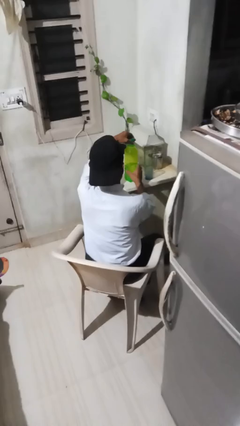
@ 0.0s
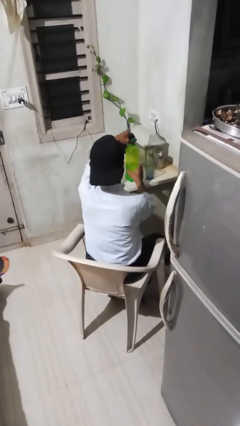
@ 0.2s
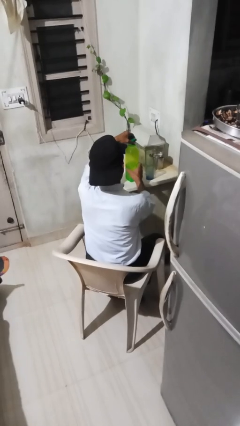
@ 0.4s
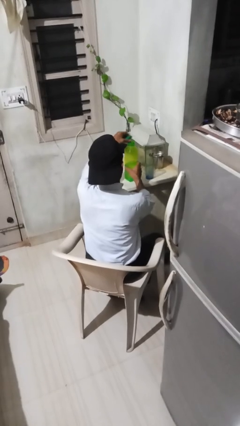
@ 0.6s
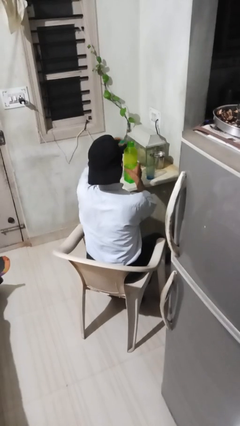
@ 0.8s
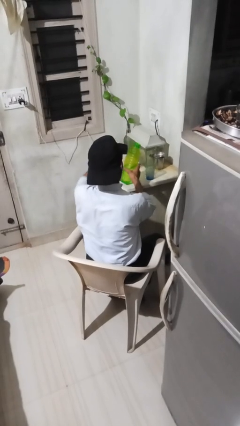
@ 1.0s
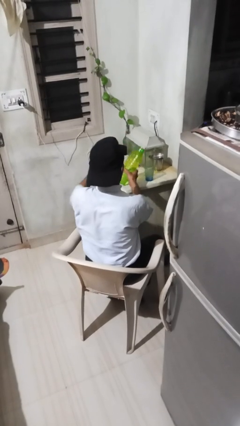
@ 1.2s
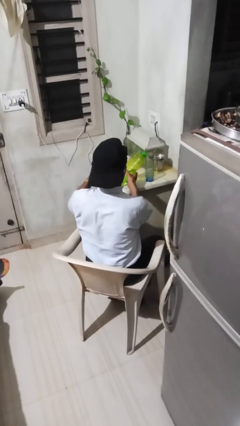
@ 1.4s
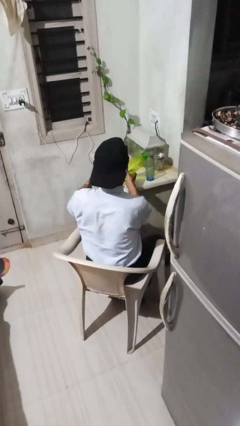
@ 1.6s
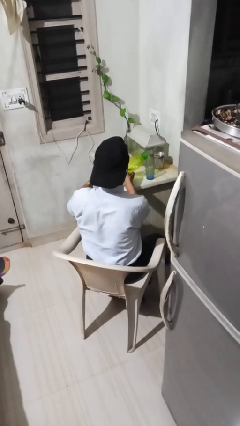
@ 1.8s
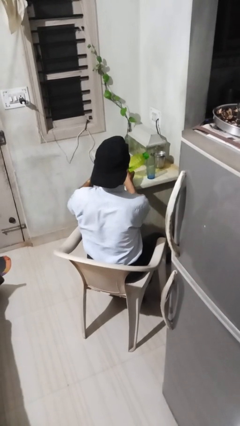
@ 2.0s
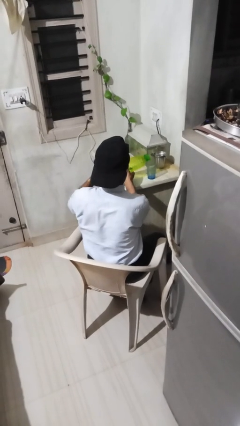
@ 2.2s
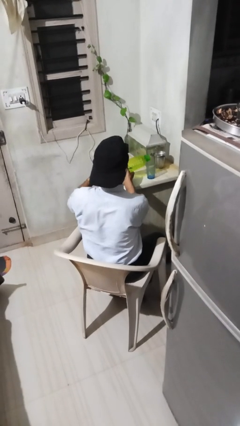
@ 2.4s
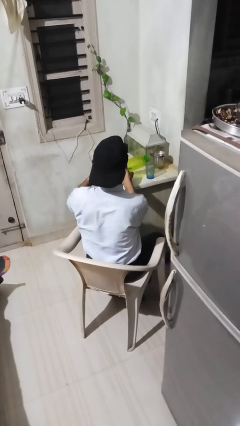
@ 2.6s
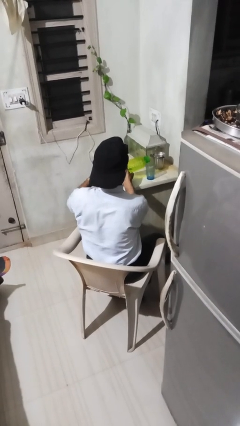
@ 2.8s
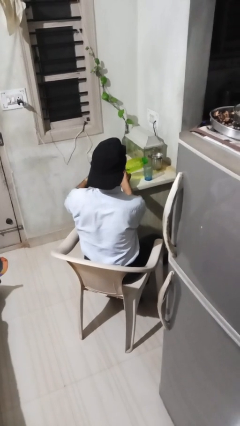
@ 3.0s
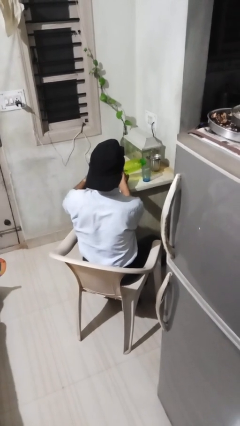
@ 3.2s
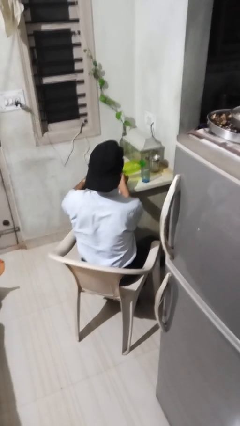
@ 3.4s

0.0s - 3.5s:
person pours liquid into cup

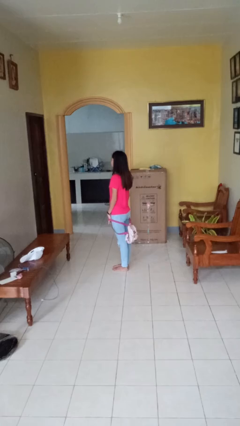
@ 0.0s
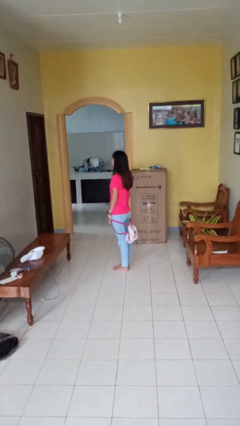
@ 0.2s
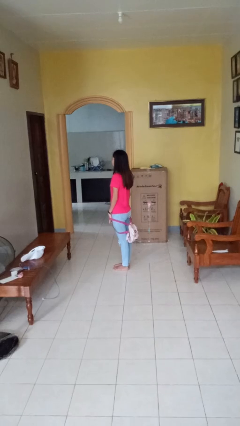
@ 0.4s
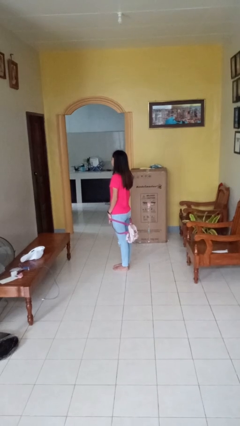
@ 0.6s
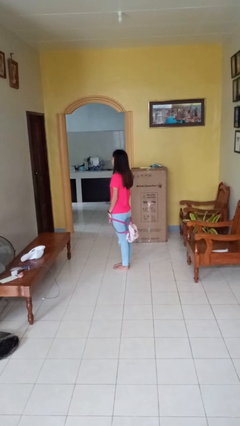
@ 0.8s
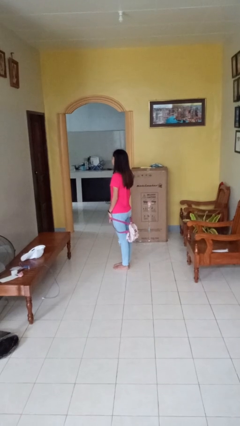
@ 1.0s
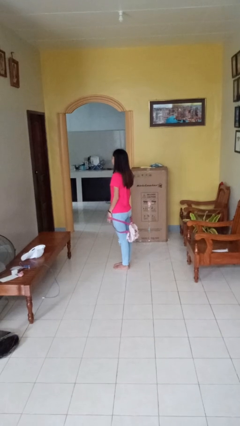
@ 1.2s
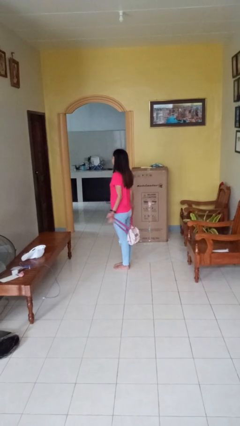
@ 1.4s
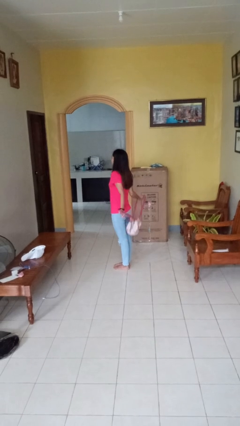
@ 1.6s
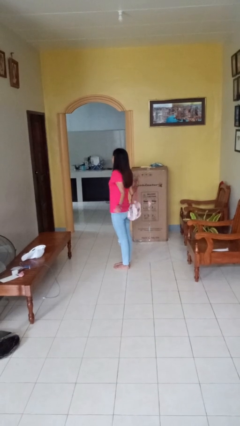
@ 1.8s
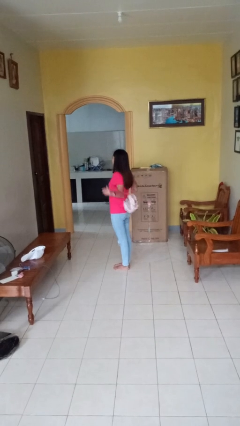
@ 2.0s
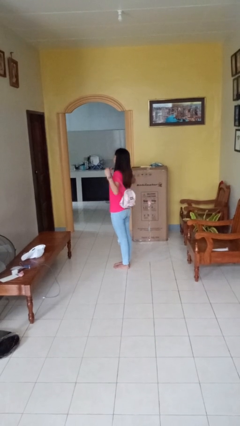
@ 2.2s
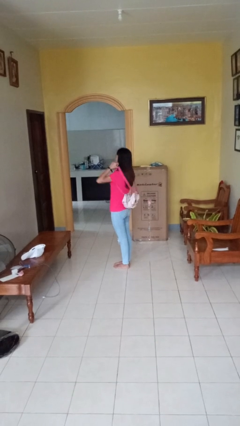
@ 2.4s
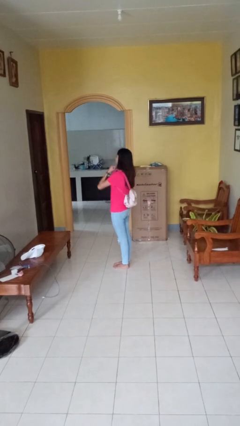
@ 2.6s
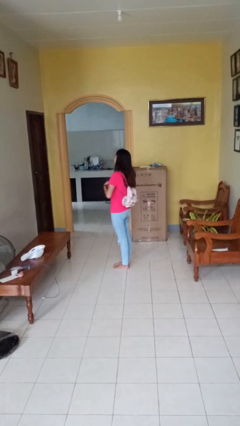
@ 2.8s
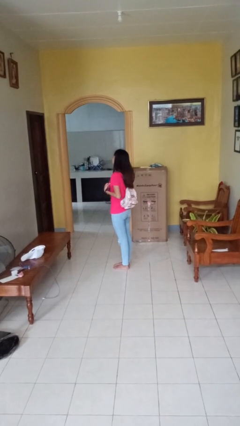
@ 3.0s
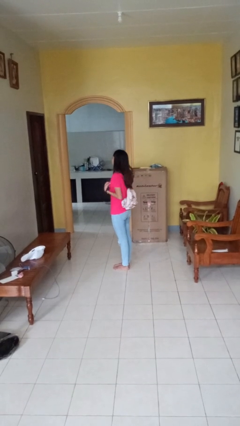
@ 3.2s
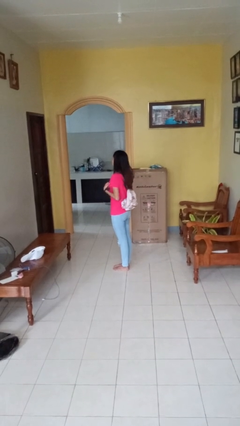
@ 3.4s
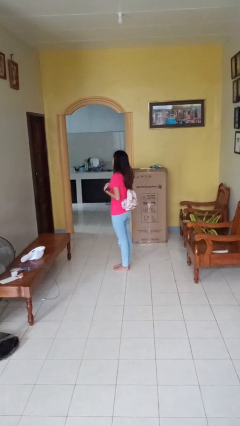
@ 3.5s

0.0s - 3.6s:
person puts on backpack

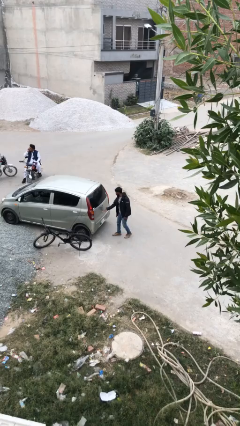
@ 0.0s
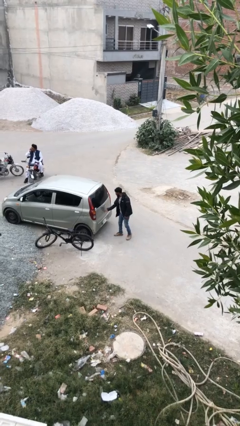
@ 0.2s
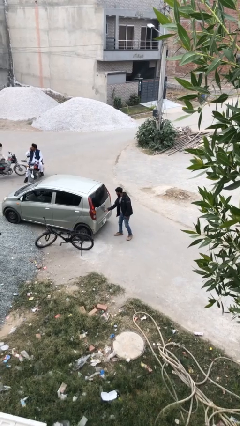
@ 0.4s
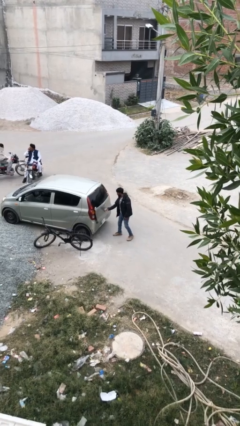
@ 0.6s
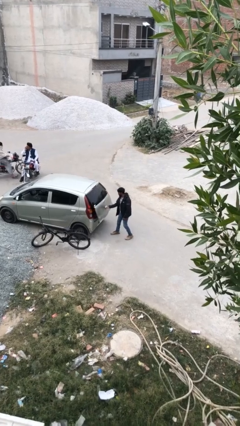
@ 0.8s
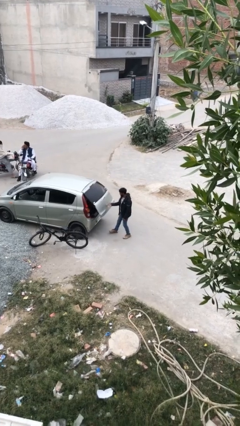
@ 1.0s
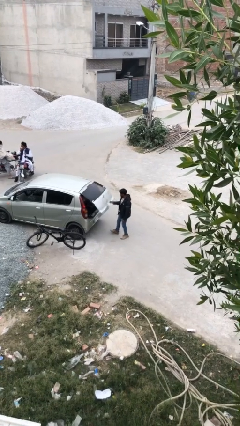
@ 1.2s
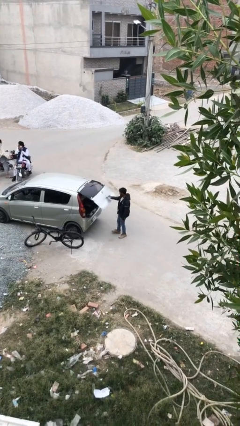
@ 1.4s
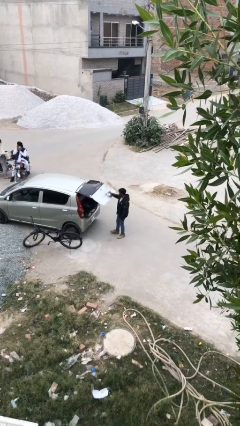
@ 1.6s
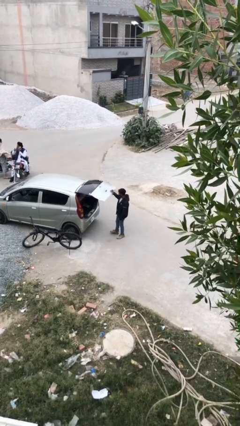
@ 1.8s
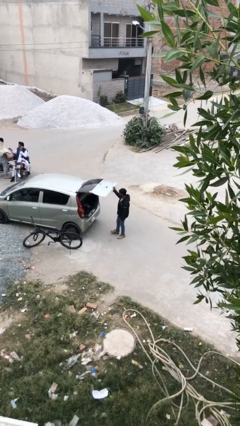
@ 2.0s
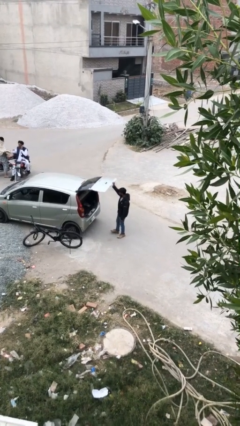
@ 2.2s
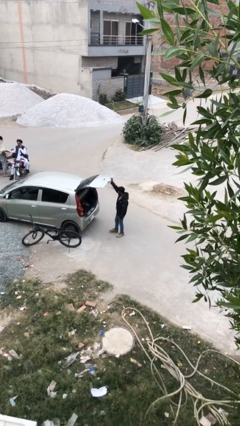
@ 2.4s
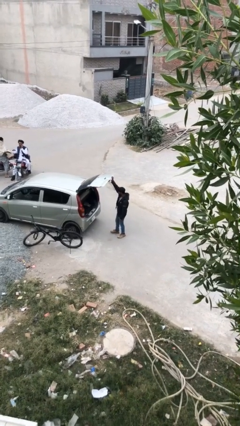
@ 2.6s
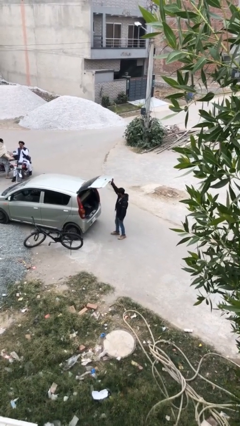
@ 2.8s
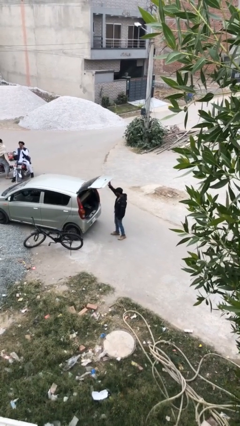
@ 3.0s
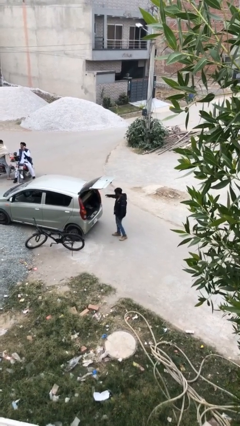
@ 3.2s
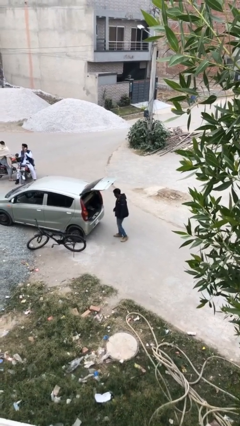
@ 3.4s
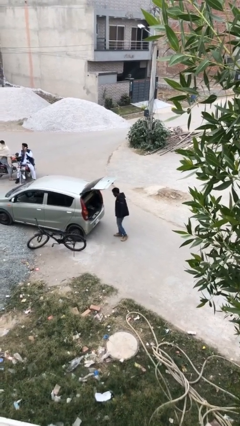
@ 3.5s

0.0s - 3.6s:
person opens car trunk

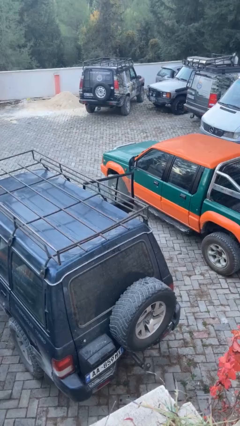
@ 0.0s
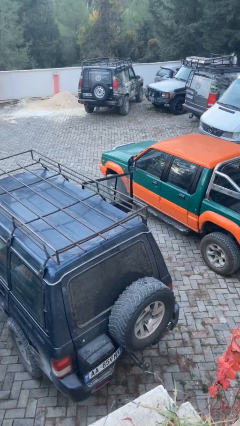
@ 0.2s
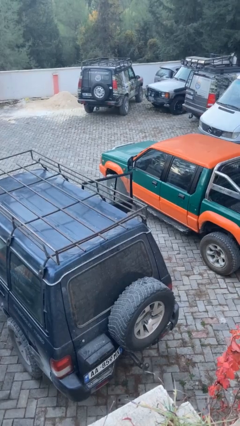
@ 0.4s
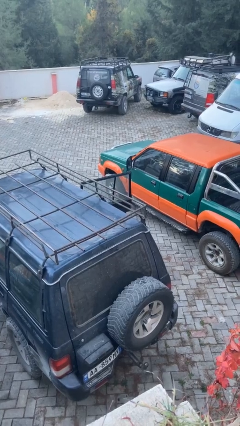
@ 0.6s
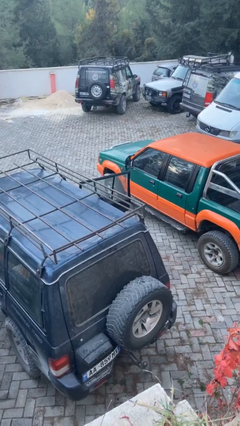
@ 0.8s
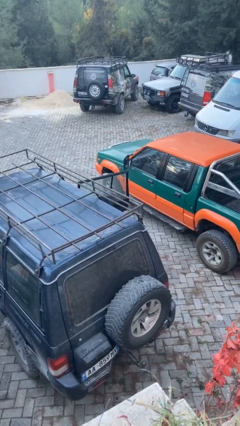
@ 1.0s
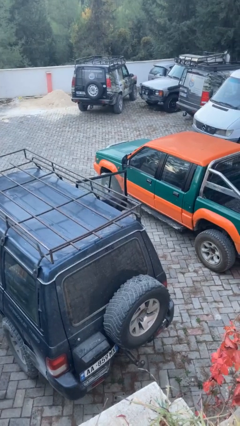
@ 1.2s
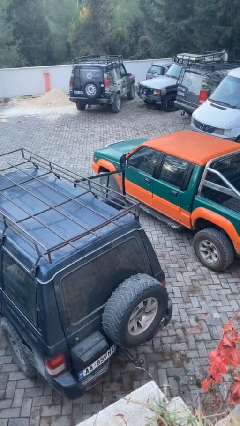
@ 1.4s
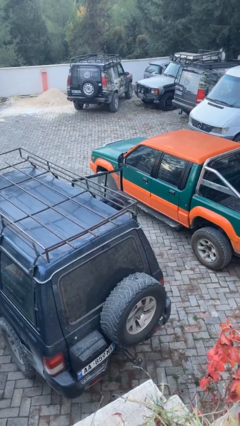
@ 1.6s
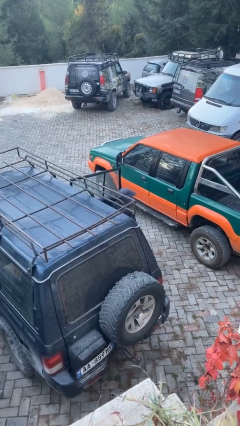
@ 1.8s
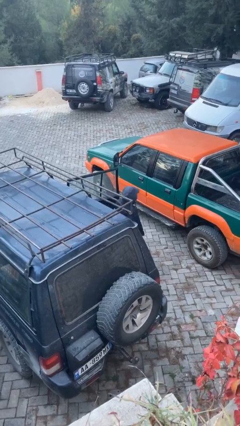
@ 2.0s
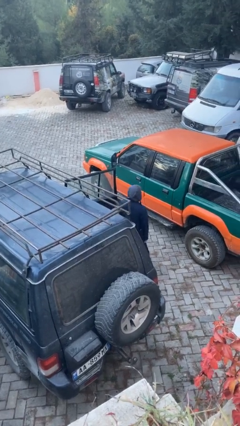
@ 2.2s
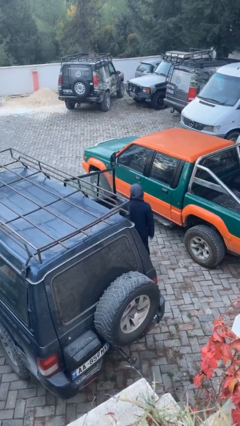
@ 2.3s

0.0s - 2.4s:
person exits car

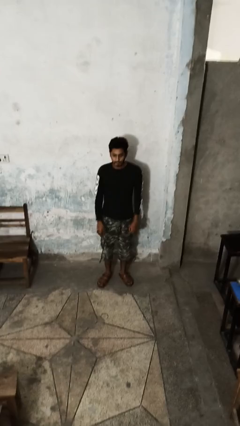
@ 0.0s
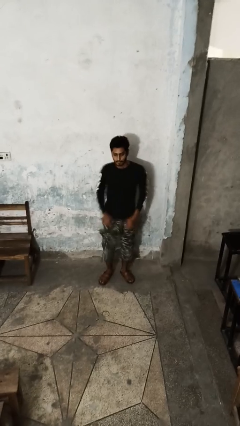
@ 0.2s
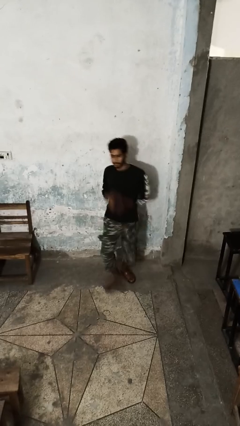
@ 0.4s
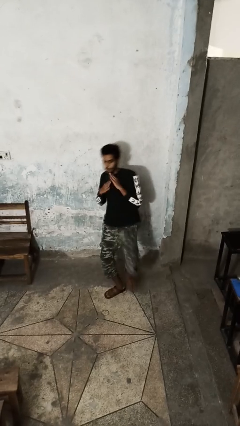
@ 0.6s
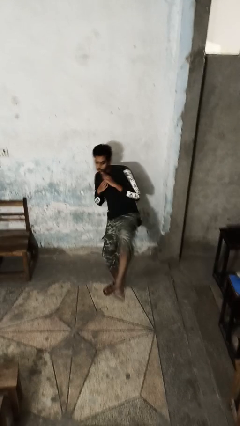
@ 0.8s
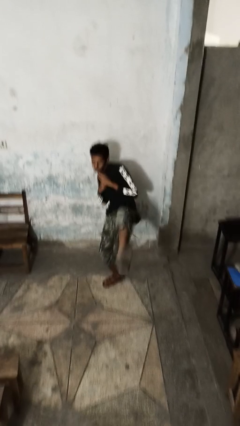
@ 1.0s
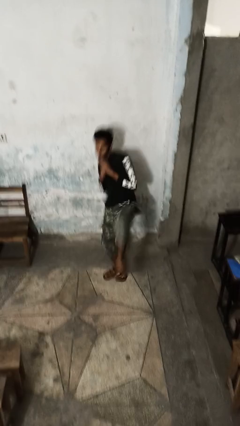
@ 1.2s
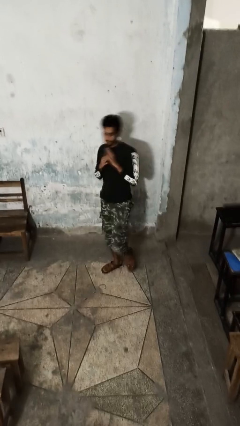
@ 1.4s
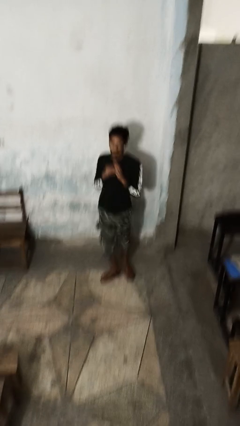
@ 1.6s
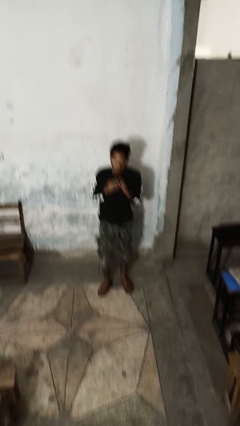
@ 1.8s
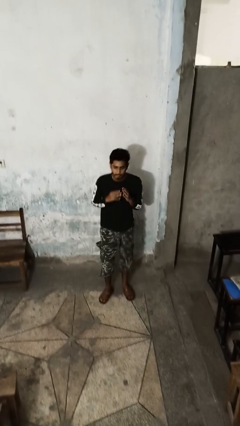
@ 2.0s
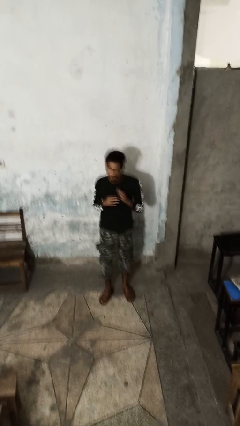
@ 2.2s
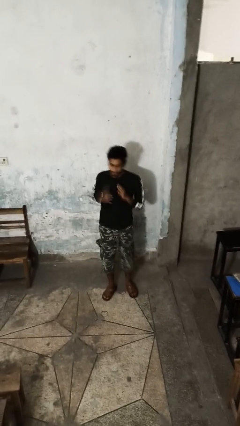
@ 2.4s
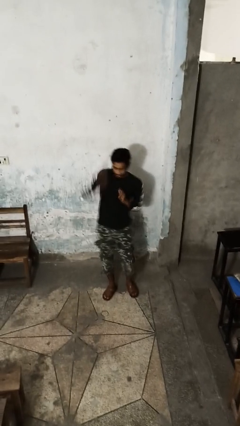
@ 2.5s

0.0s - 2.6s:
person karate kicks

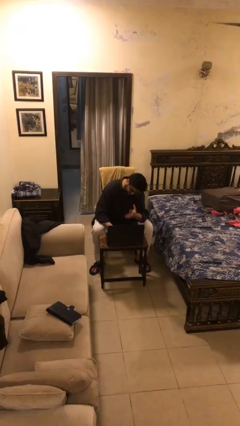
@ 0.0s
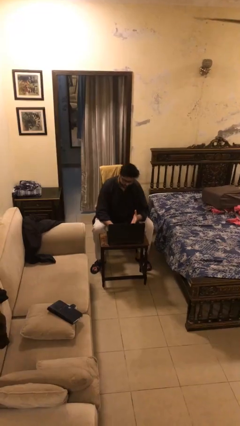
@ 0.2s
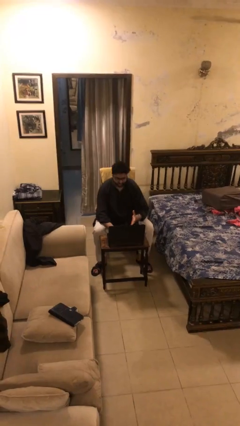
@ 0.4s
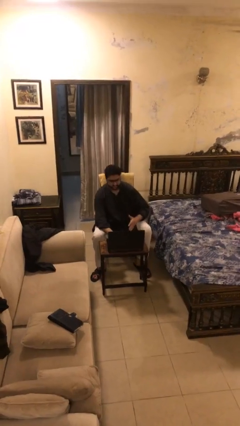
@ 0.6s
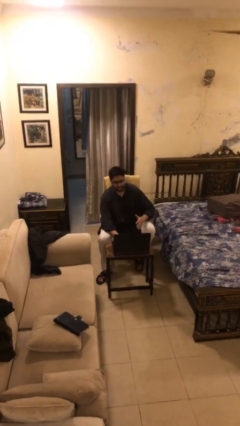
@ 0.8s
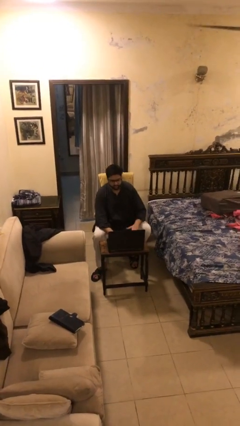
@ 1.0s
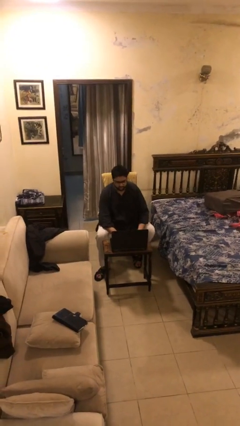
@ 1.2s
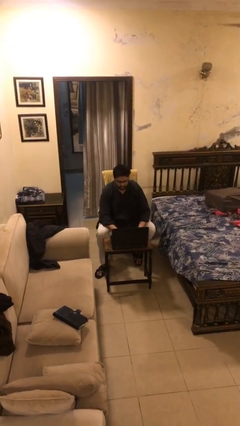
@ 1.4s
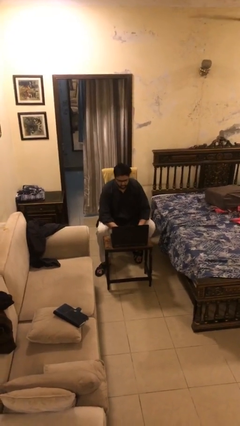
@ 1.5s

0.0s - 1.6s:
person interacts with laptop
